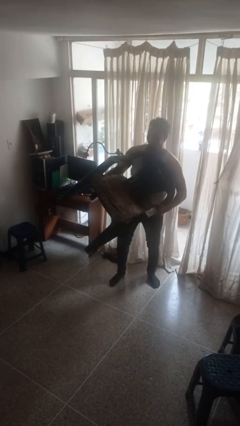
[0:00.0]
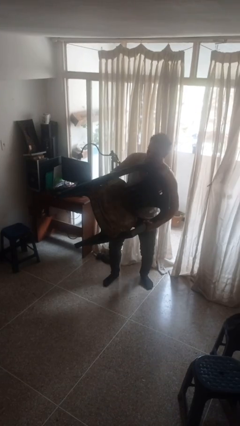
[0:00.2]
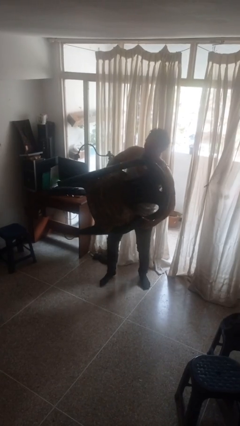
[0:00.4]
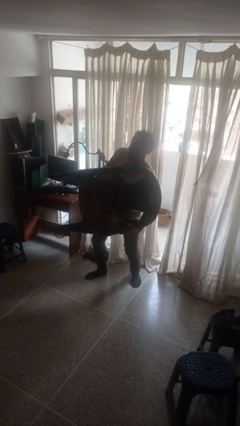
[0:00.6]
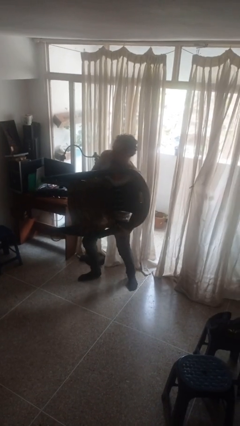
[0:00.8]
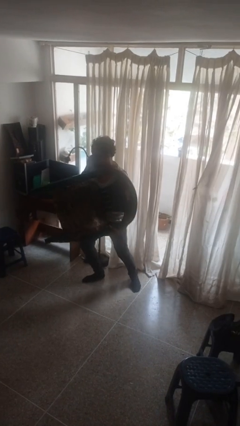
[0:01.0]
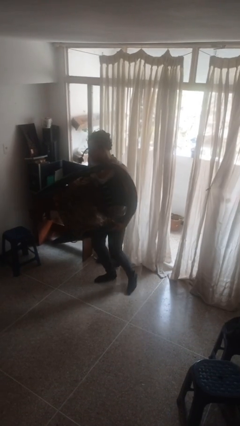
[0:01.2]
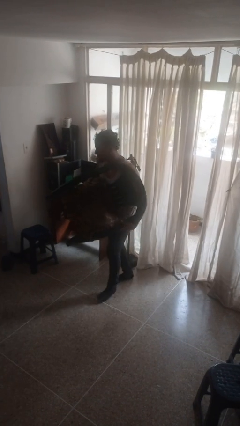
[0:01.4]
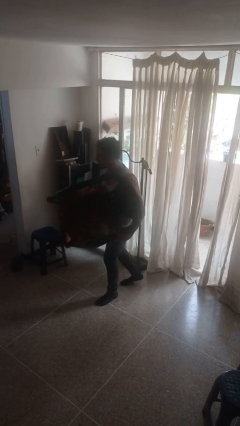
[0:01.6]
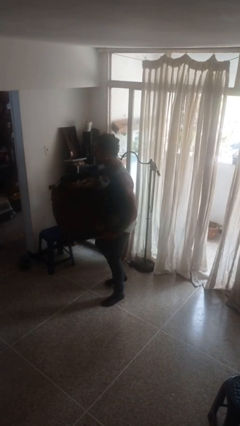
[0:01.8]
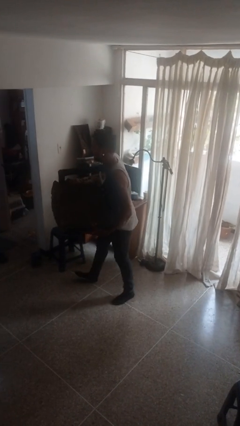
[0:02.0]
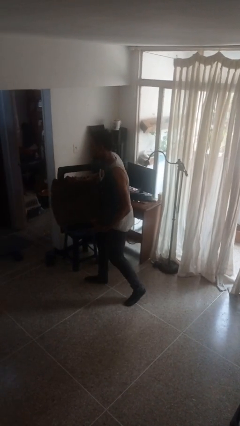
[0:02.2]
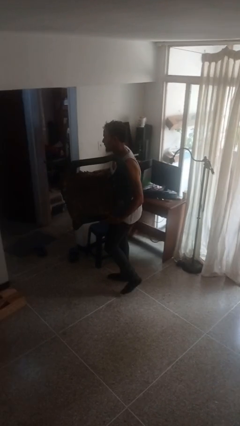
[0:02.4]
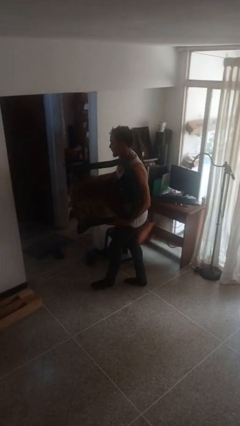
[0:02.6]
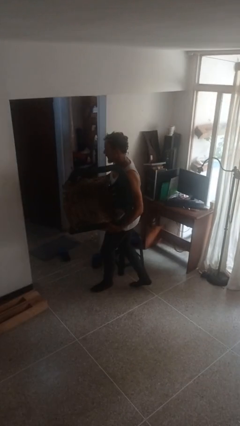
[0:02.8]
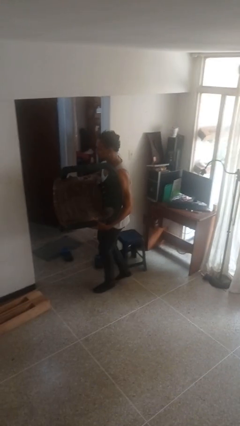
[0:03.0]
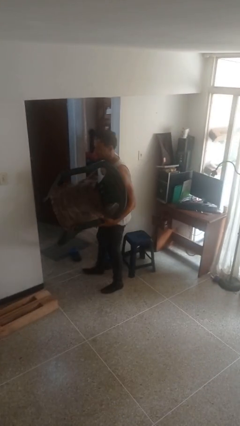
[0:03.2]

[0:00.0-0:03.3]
person carries furniture

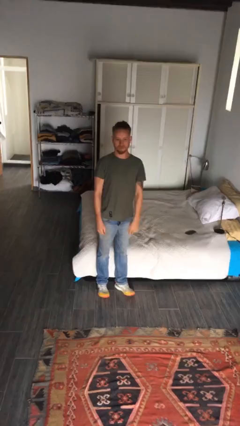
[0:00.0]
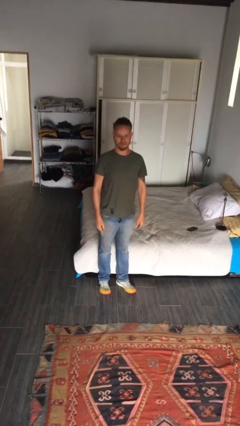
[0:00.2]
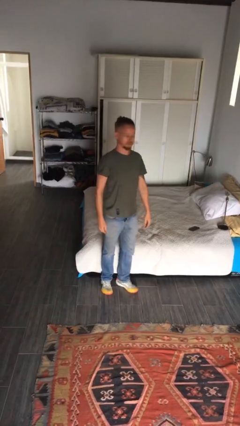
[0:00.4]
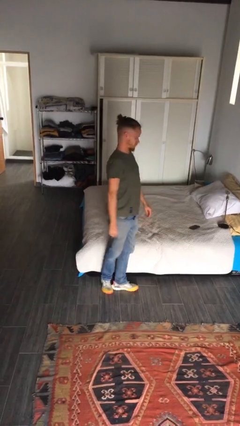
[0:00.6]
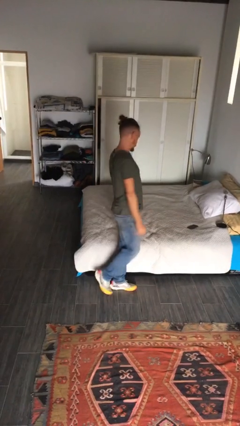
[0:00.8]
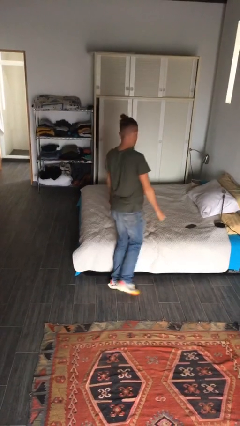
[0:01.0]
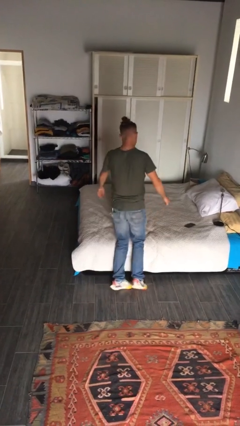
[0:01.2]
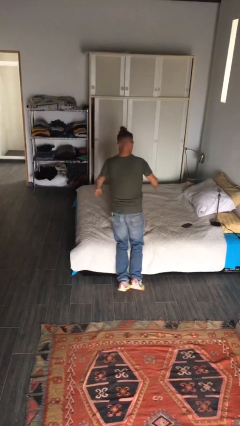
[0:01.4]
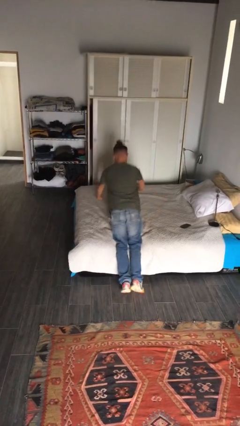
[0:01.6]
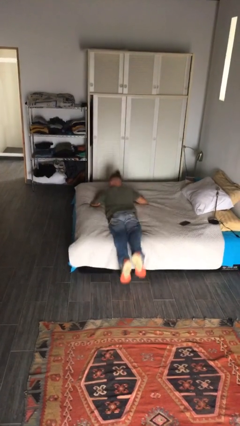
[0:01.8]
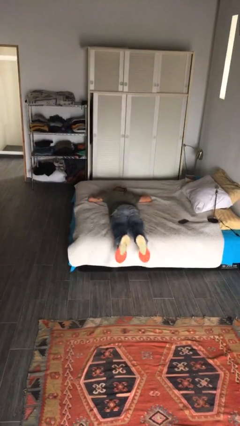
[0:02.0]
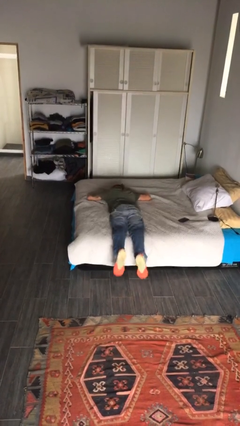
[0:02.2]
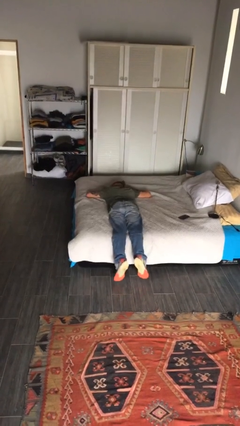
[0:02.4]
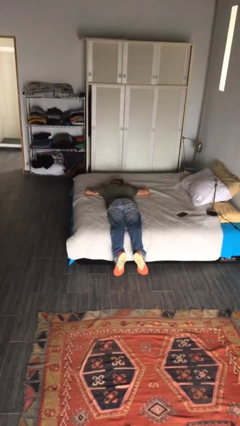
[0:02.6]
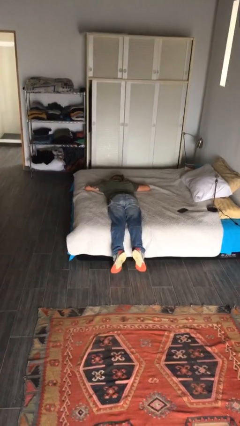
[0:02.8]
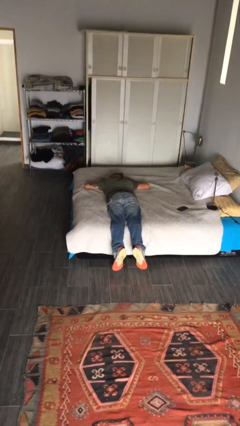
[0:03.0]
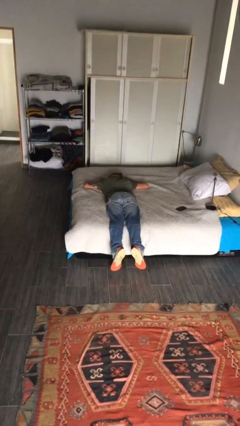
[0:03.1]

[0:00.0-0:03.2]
person lies down on couch

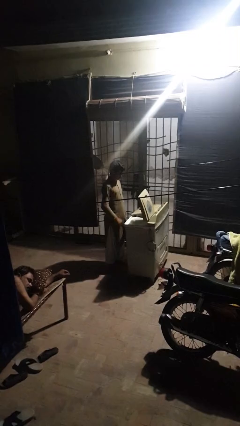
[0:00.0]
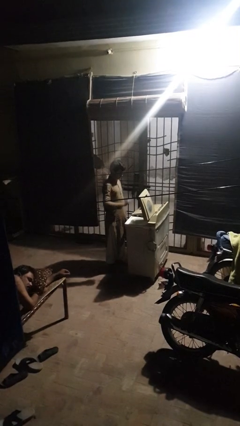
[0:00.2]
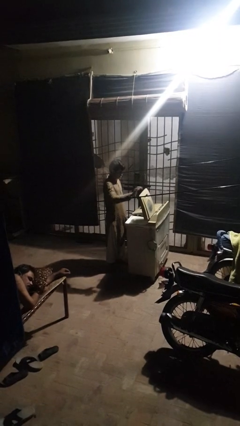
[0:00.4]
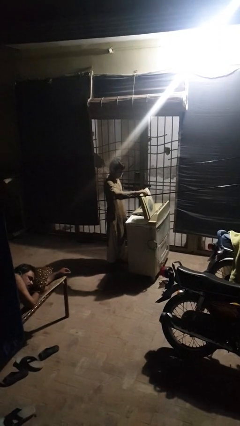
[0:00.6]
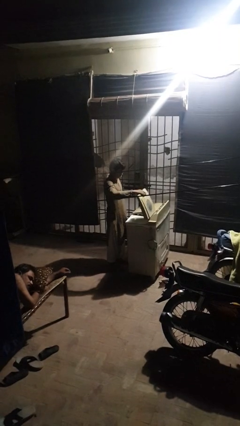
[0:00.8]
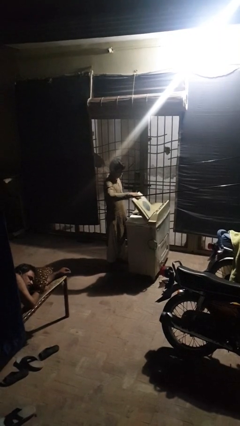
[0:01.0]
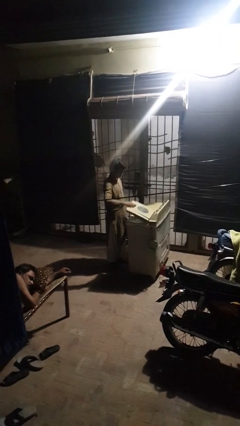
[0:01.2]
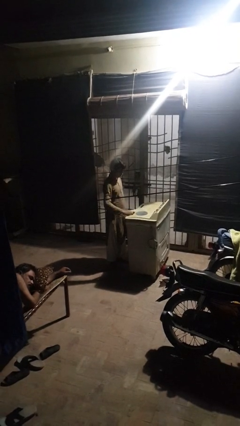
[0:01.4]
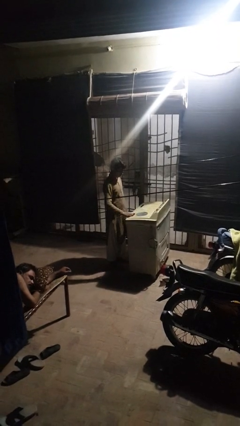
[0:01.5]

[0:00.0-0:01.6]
person closes clothes washer

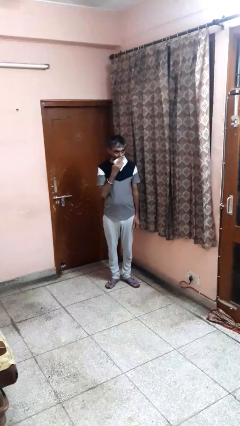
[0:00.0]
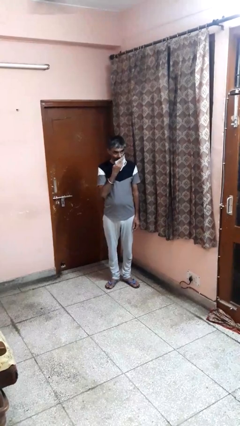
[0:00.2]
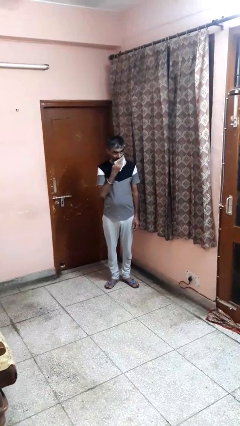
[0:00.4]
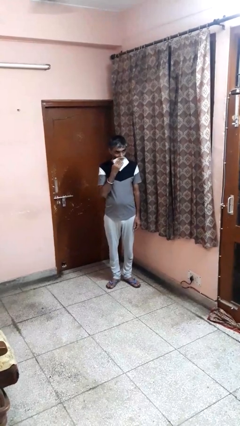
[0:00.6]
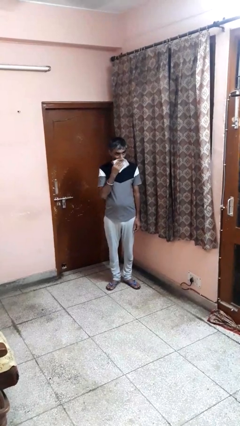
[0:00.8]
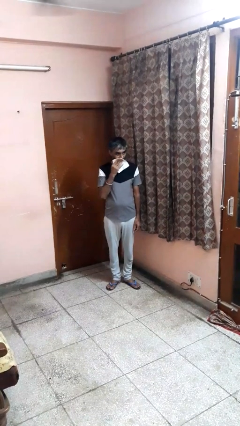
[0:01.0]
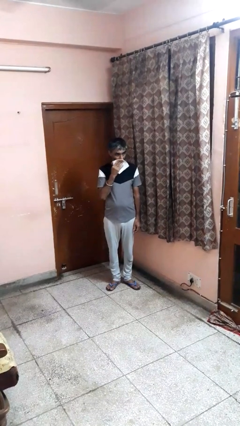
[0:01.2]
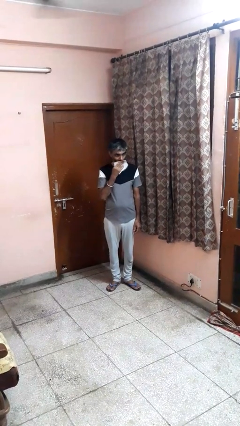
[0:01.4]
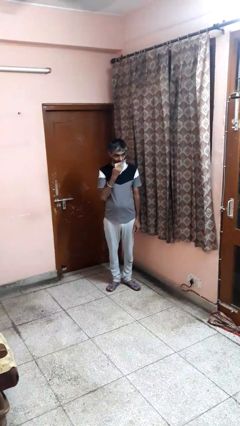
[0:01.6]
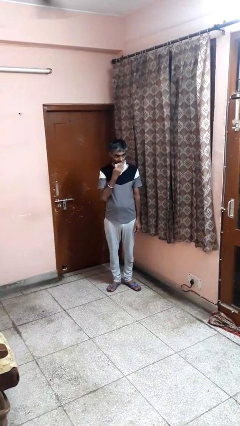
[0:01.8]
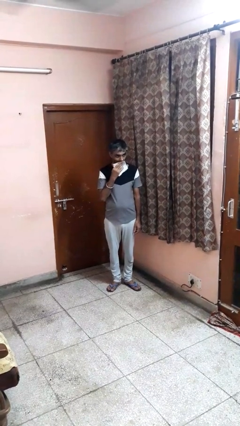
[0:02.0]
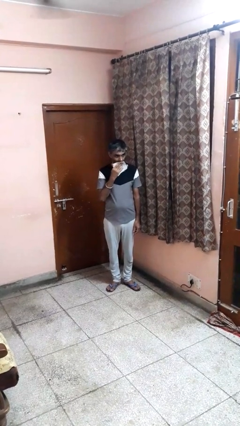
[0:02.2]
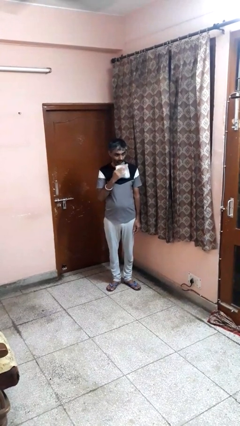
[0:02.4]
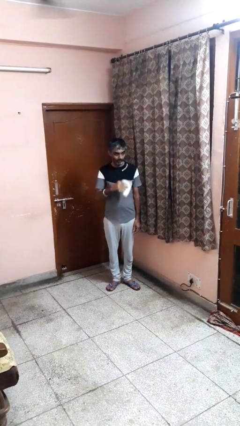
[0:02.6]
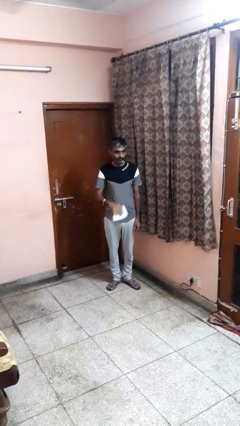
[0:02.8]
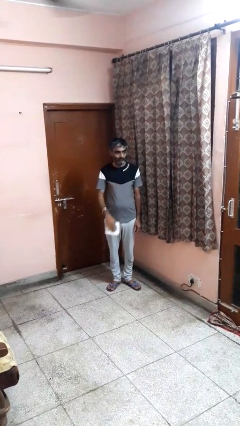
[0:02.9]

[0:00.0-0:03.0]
person wipes mouth with napkin

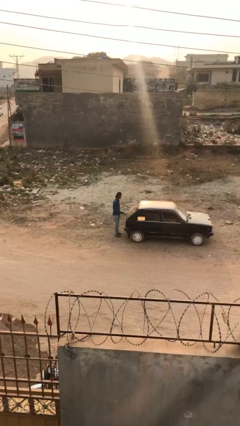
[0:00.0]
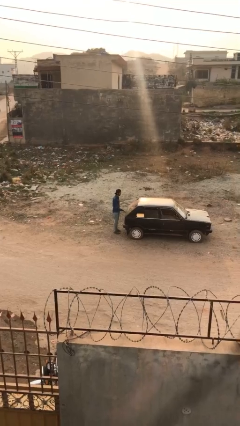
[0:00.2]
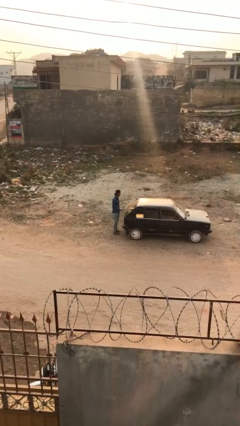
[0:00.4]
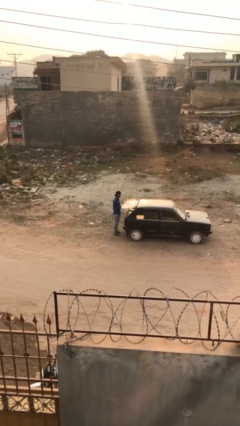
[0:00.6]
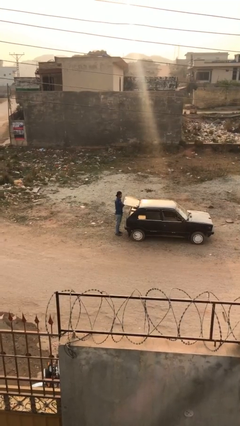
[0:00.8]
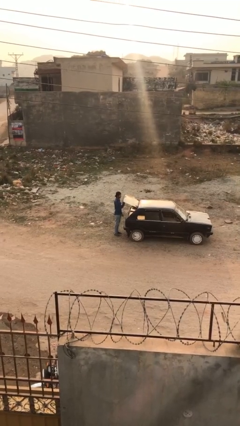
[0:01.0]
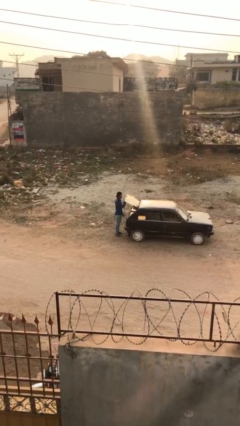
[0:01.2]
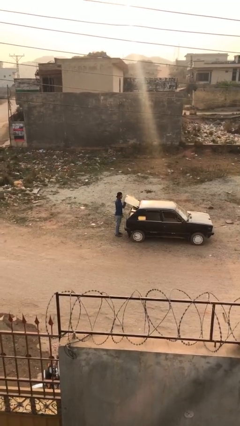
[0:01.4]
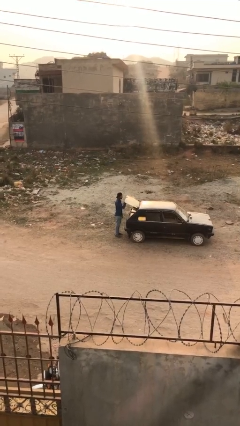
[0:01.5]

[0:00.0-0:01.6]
person opens car trunk

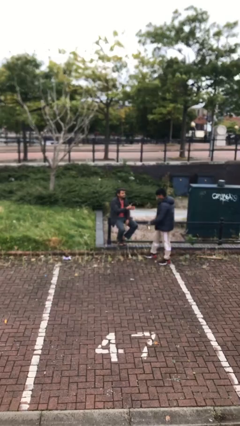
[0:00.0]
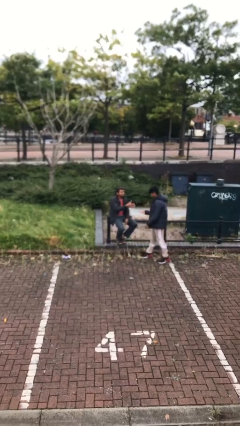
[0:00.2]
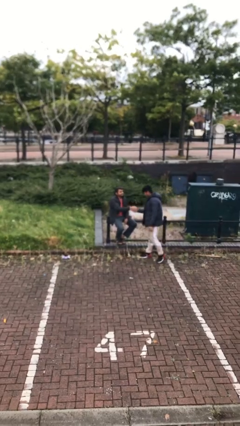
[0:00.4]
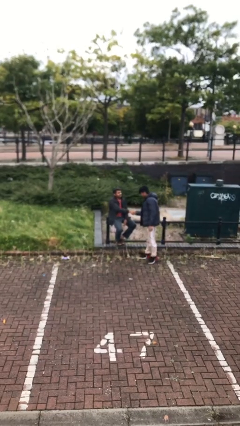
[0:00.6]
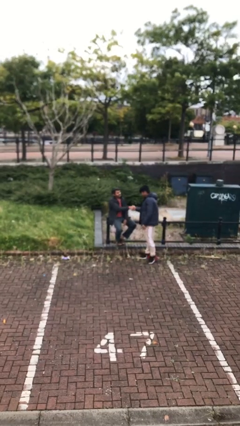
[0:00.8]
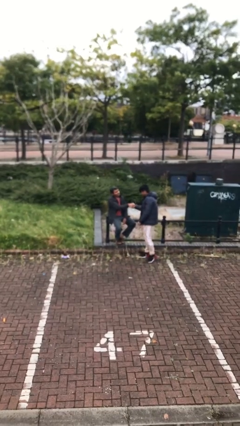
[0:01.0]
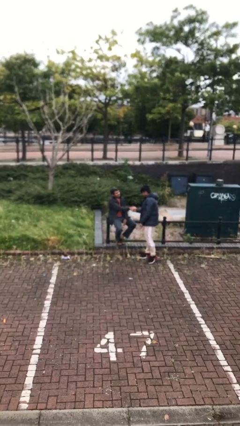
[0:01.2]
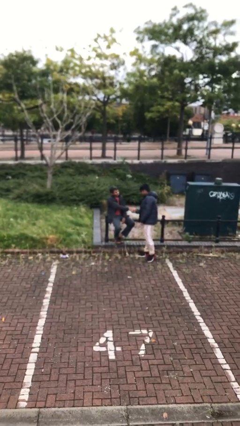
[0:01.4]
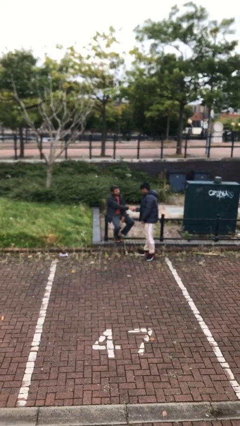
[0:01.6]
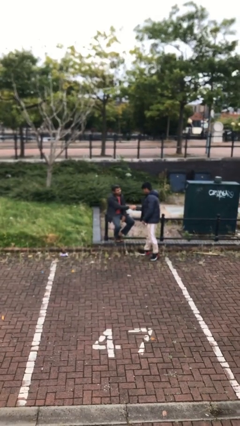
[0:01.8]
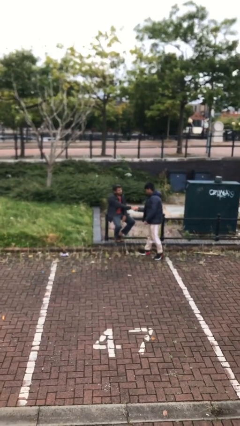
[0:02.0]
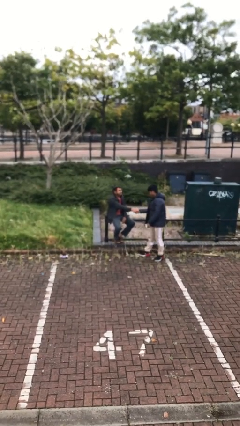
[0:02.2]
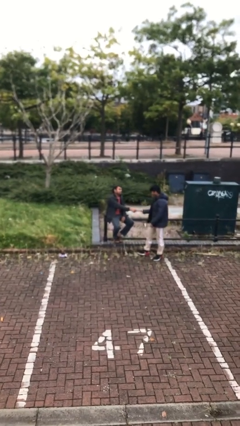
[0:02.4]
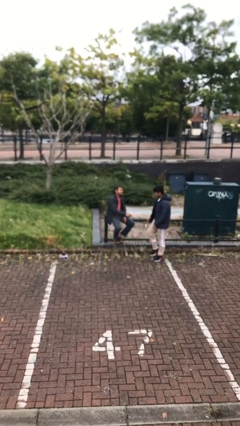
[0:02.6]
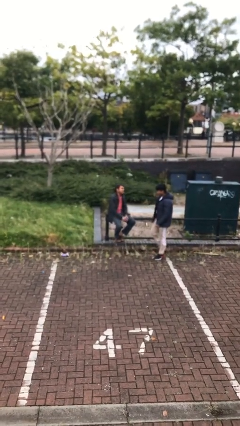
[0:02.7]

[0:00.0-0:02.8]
person shakes hand

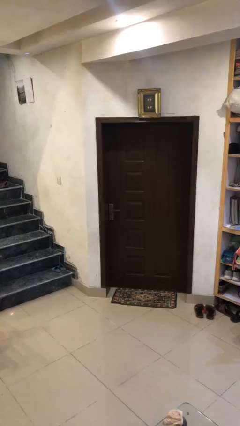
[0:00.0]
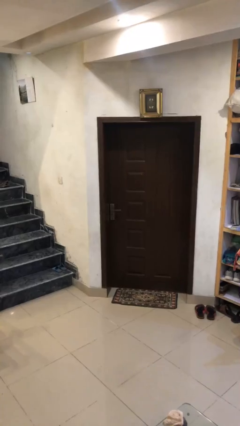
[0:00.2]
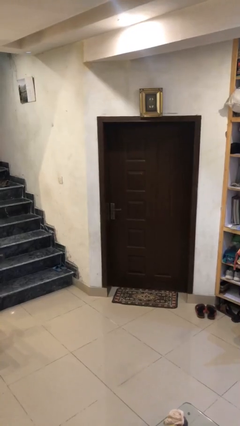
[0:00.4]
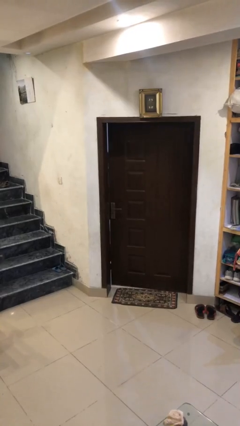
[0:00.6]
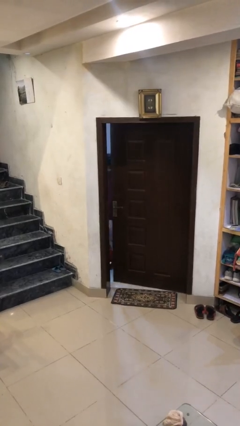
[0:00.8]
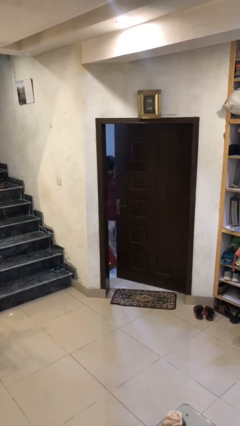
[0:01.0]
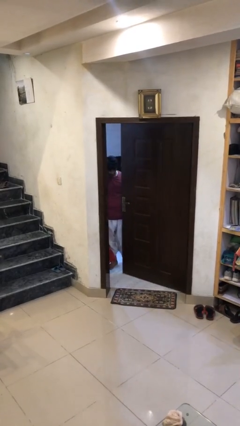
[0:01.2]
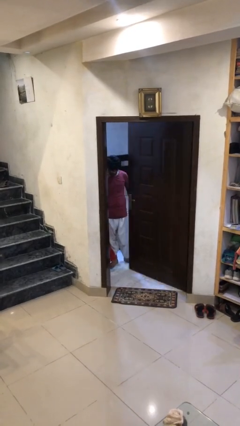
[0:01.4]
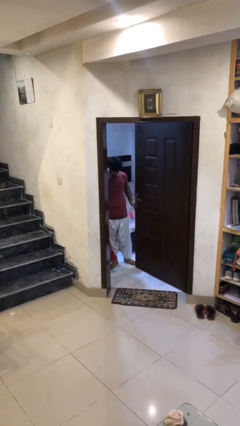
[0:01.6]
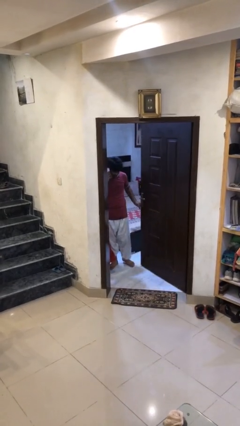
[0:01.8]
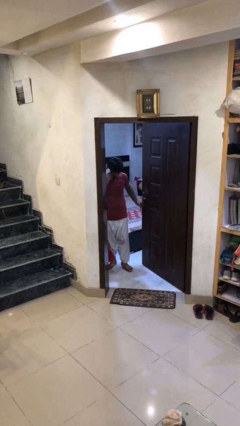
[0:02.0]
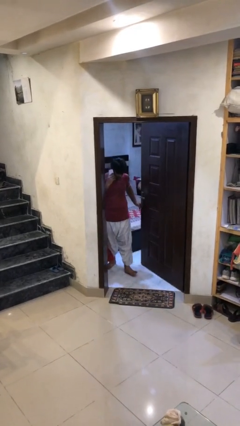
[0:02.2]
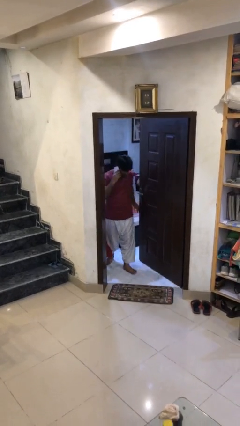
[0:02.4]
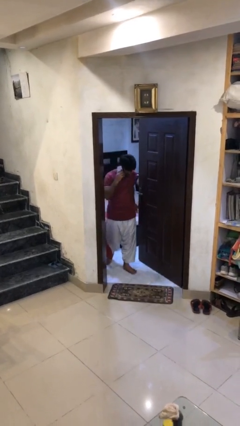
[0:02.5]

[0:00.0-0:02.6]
person opens facility door
